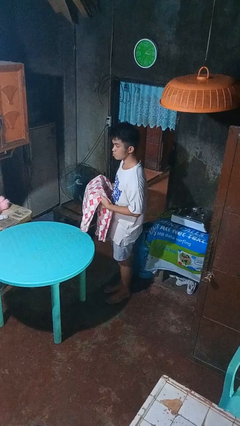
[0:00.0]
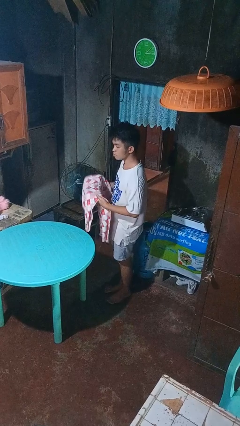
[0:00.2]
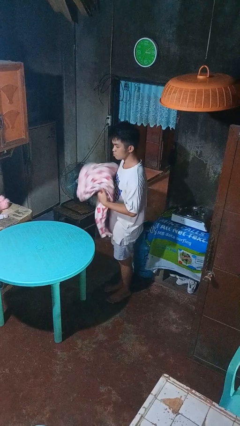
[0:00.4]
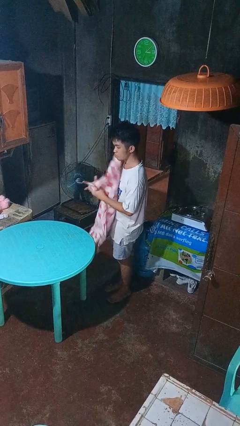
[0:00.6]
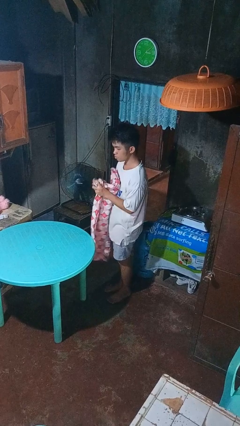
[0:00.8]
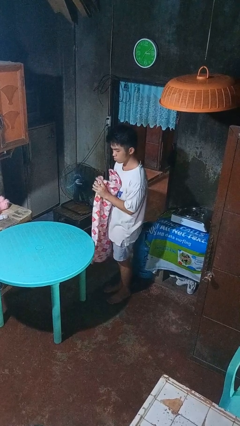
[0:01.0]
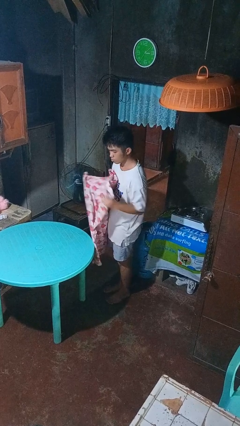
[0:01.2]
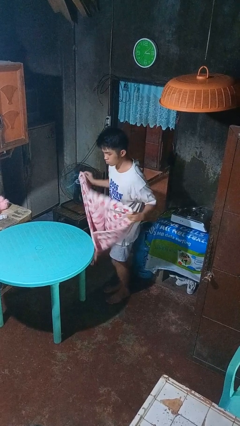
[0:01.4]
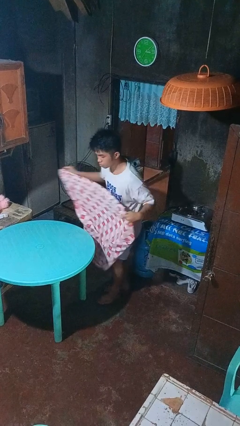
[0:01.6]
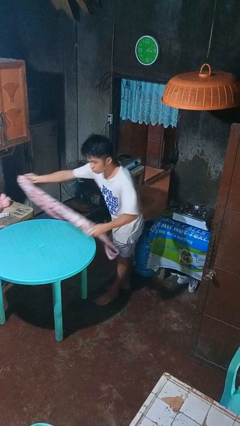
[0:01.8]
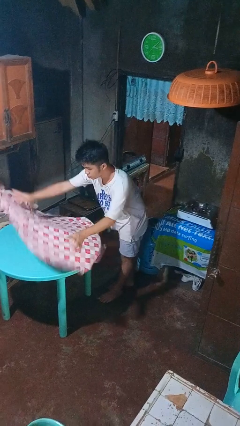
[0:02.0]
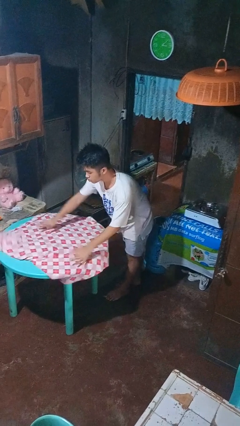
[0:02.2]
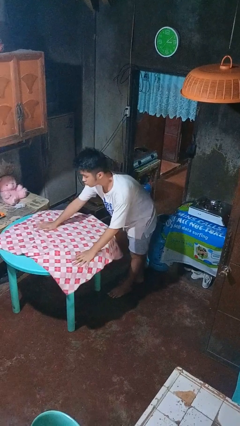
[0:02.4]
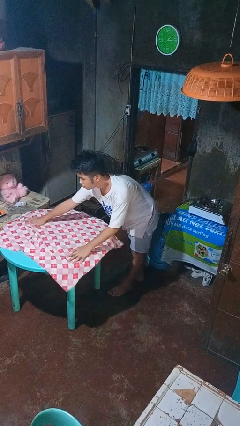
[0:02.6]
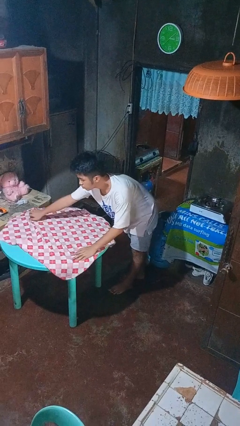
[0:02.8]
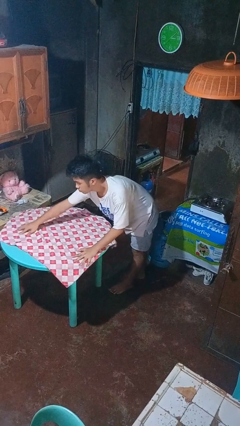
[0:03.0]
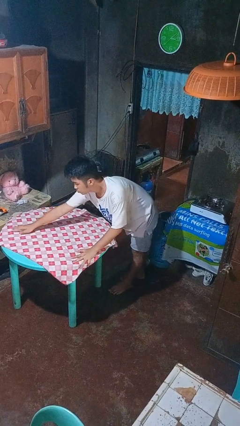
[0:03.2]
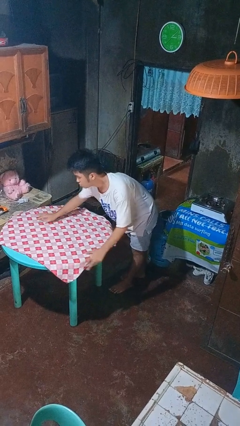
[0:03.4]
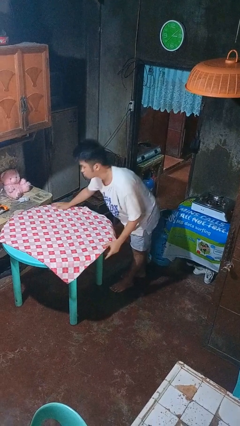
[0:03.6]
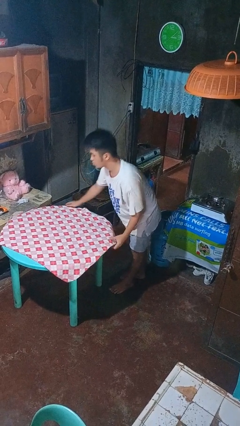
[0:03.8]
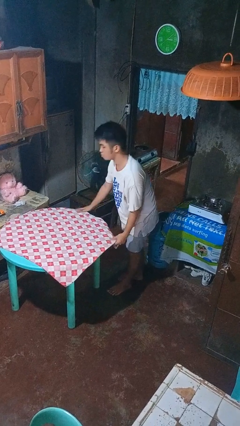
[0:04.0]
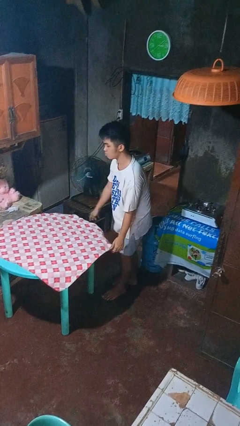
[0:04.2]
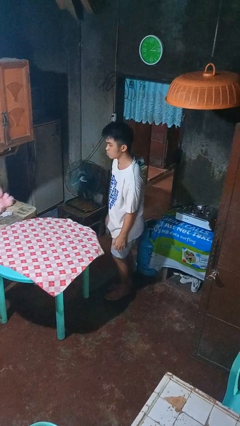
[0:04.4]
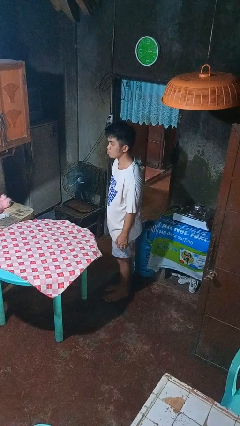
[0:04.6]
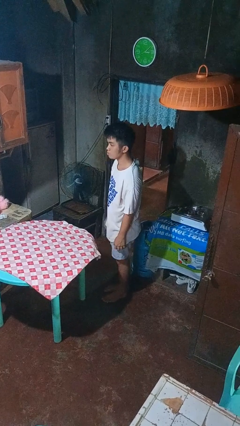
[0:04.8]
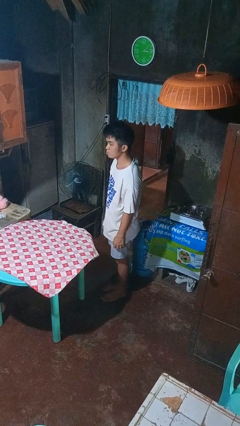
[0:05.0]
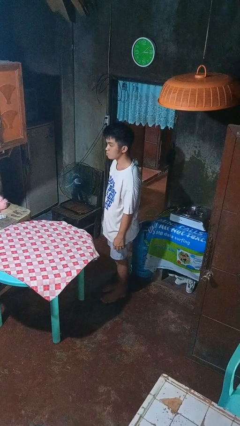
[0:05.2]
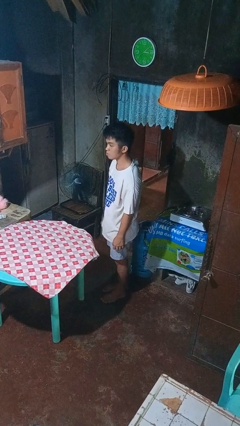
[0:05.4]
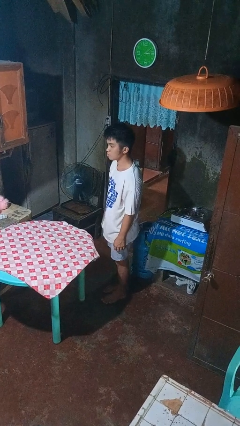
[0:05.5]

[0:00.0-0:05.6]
person spreads tablecloth

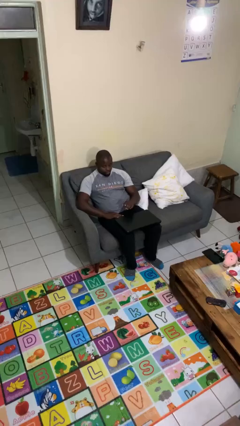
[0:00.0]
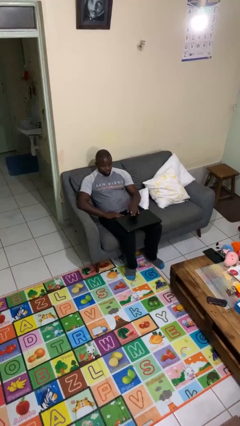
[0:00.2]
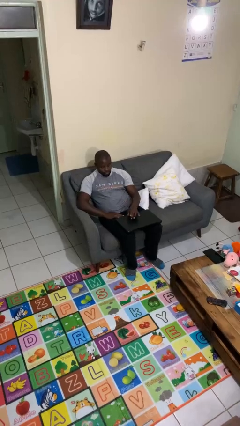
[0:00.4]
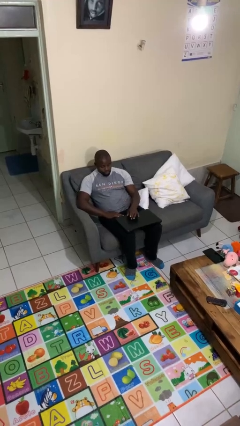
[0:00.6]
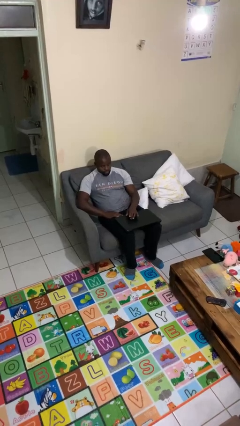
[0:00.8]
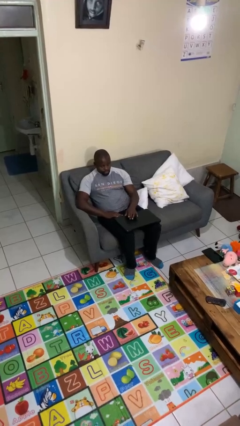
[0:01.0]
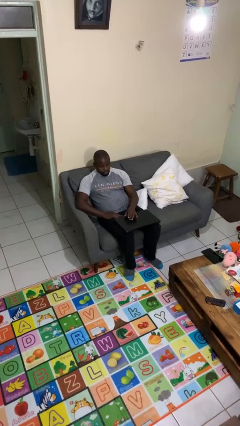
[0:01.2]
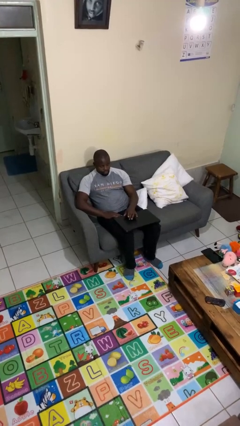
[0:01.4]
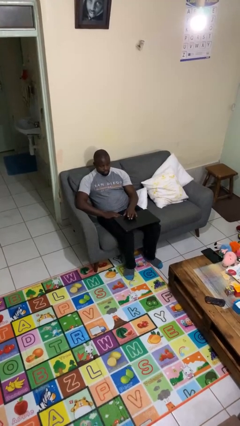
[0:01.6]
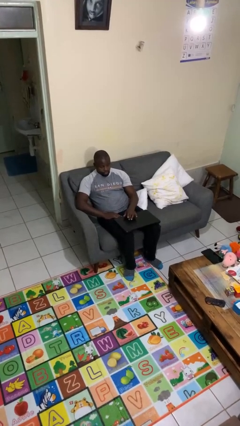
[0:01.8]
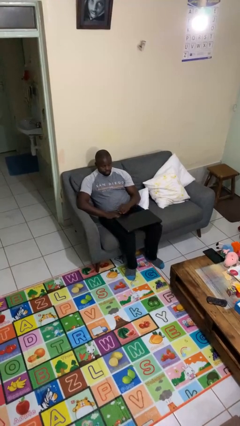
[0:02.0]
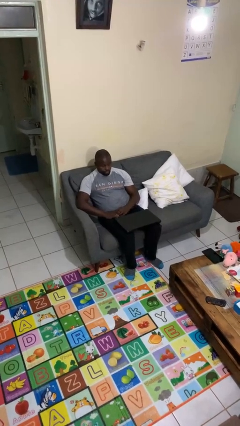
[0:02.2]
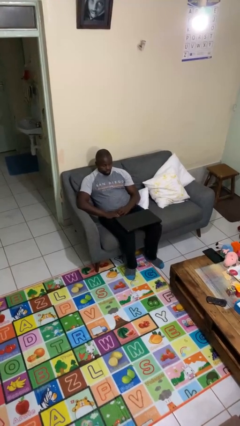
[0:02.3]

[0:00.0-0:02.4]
person taps object with finger

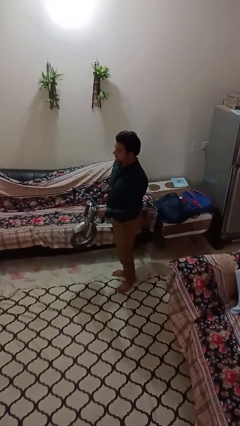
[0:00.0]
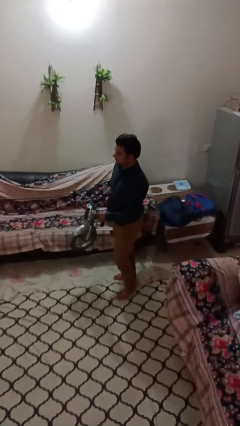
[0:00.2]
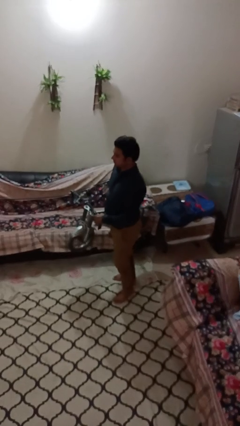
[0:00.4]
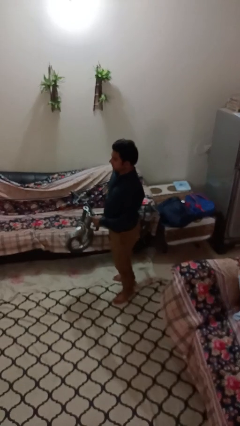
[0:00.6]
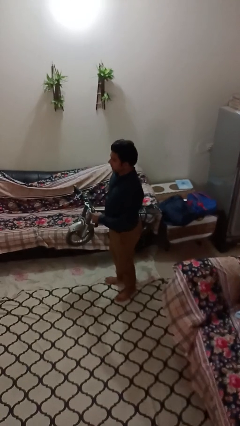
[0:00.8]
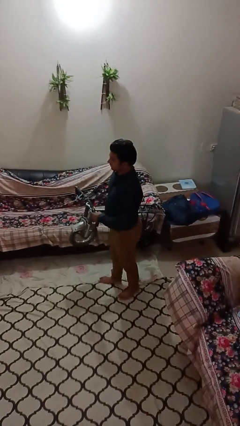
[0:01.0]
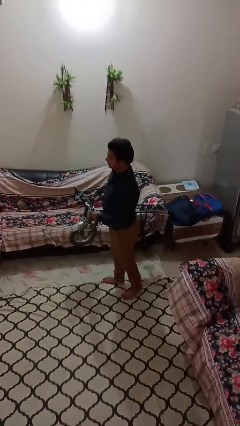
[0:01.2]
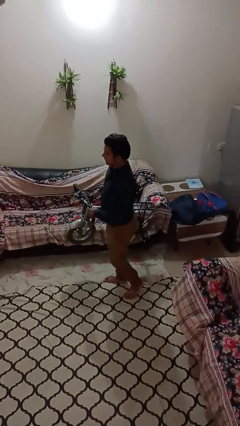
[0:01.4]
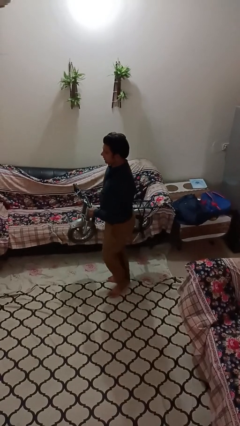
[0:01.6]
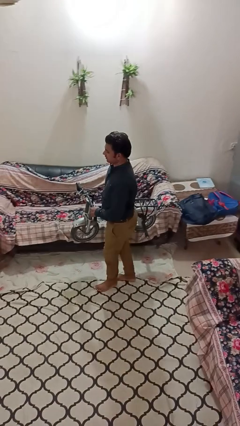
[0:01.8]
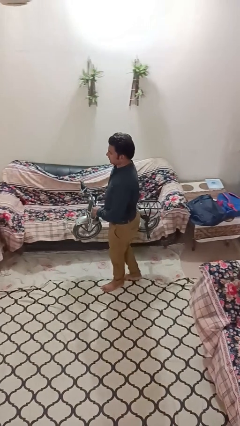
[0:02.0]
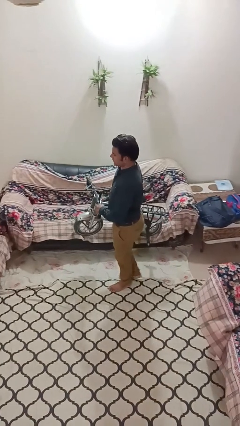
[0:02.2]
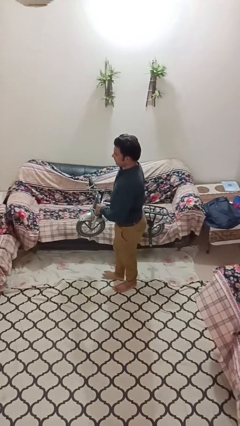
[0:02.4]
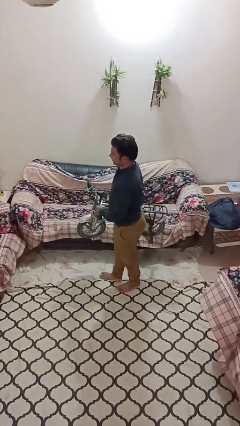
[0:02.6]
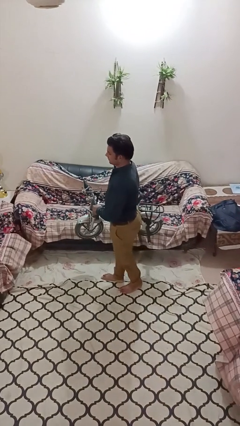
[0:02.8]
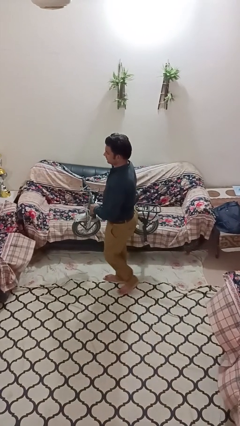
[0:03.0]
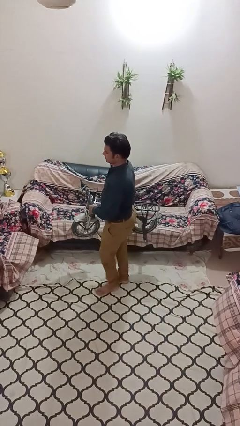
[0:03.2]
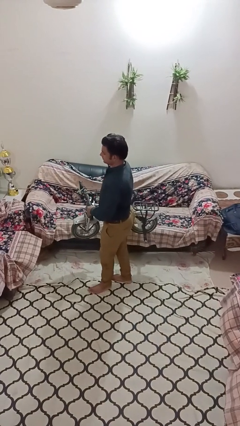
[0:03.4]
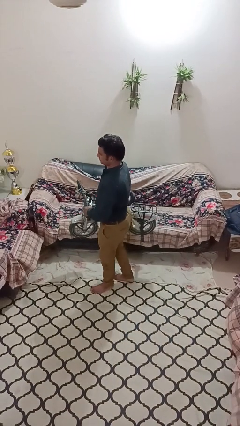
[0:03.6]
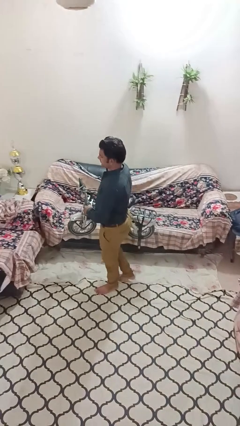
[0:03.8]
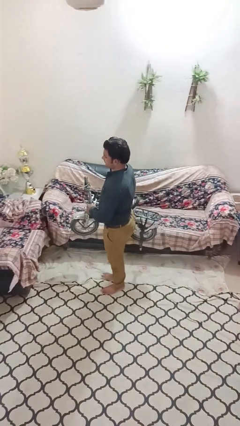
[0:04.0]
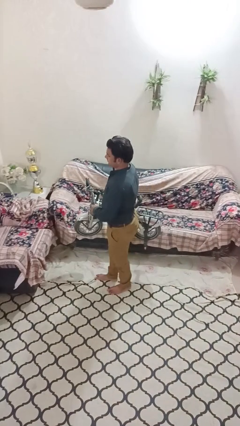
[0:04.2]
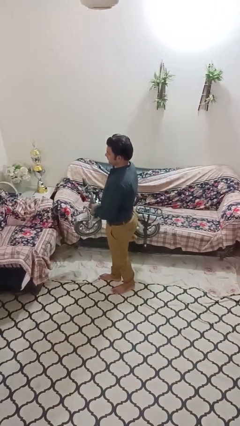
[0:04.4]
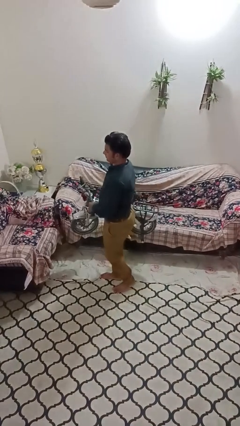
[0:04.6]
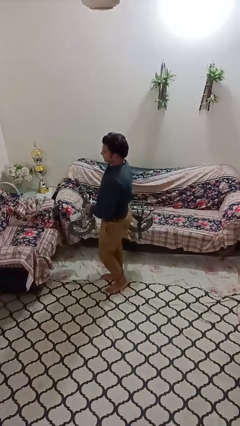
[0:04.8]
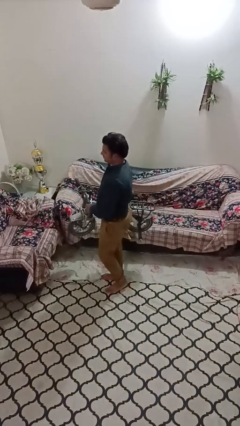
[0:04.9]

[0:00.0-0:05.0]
person carries bicycle

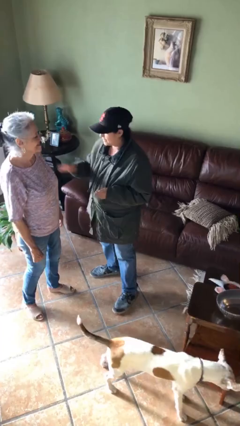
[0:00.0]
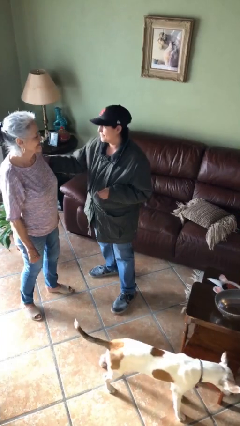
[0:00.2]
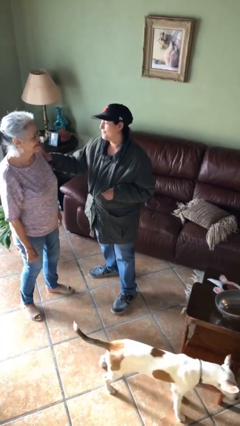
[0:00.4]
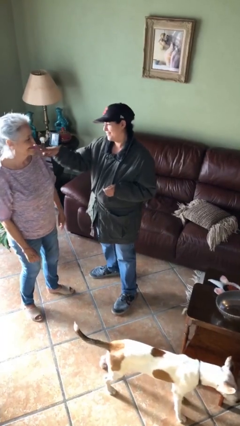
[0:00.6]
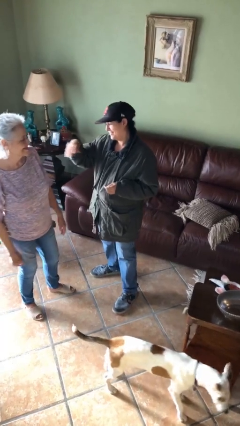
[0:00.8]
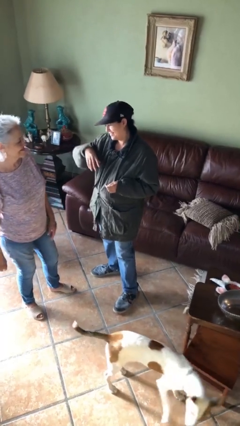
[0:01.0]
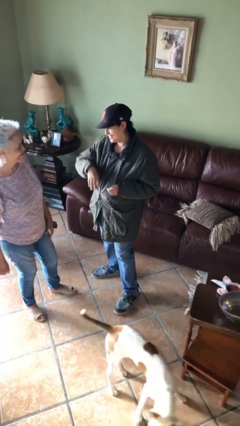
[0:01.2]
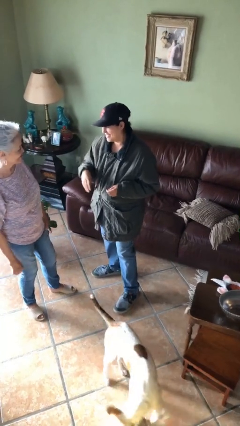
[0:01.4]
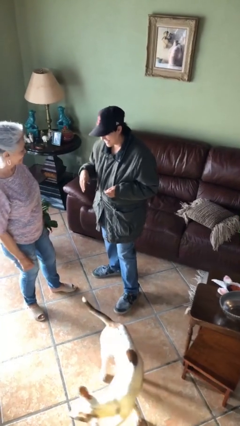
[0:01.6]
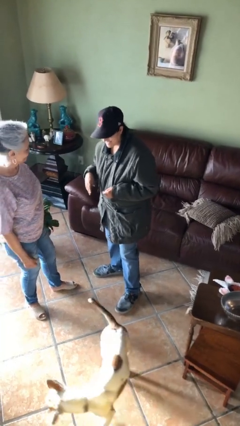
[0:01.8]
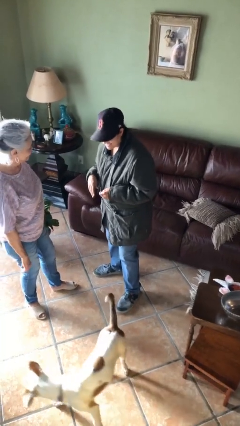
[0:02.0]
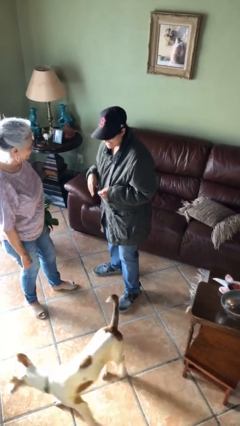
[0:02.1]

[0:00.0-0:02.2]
person shoves person

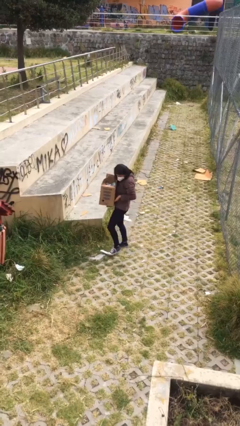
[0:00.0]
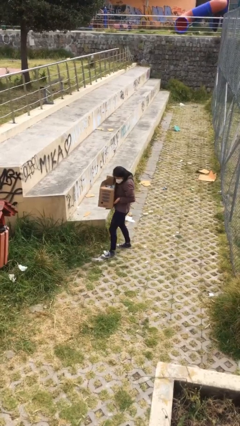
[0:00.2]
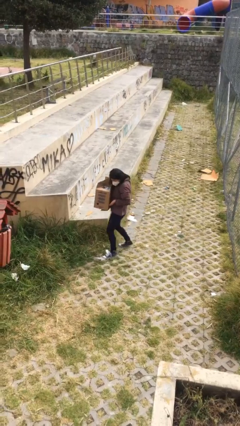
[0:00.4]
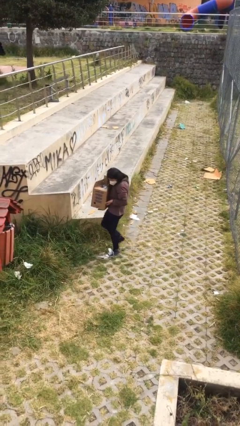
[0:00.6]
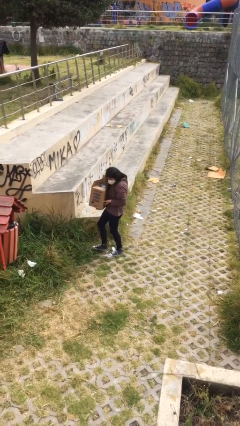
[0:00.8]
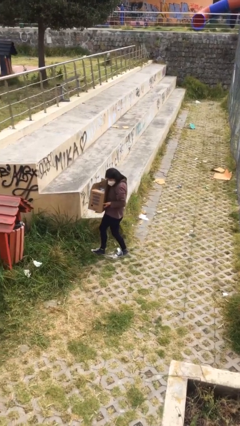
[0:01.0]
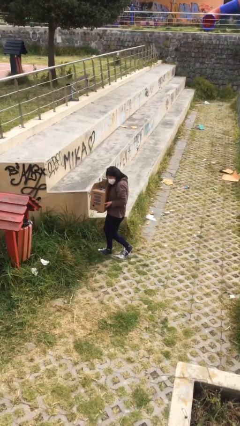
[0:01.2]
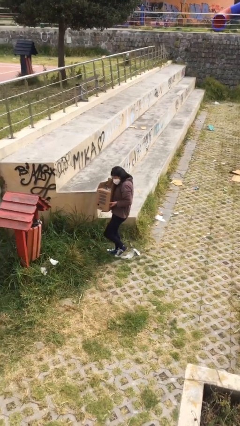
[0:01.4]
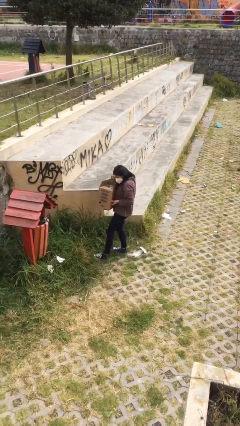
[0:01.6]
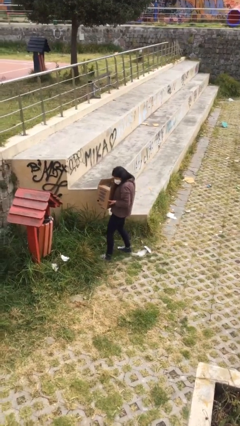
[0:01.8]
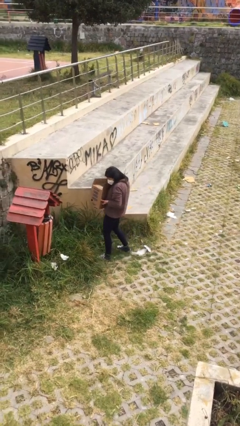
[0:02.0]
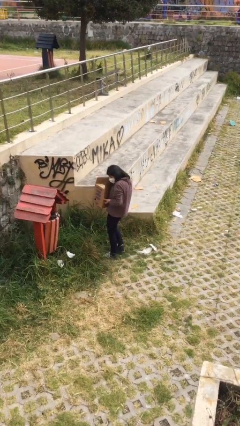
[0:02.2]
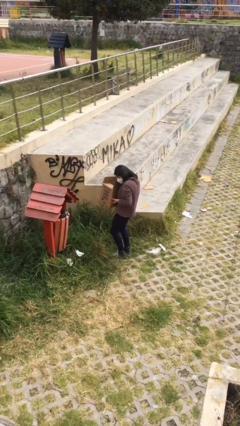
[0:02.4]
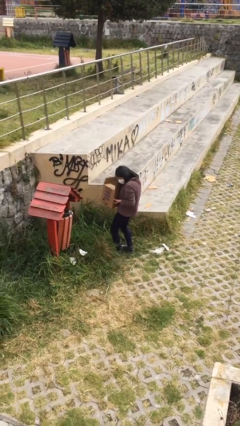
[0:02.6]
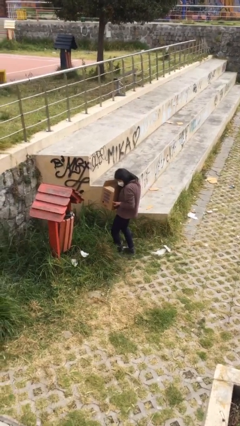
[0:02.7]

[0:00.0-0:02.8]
person carries heavy object
